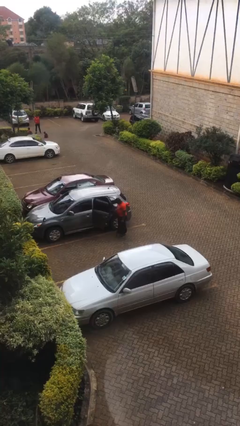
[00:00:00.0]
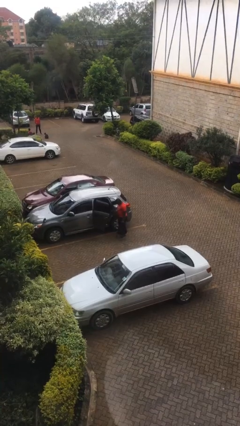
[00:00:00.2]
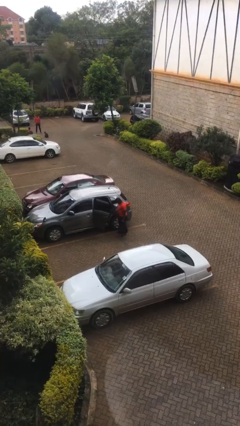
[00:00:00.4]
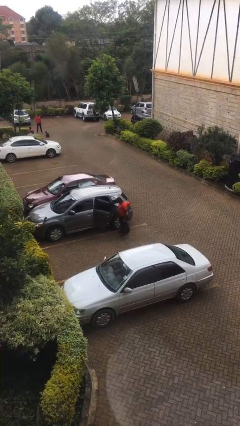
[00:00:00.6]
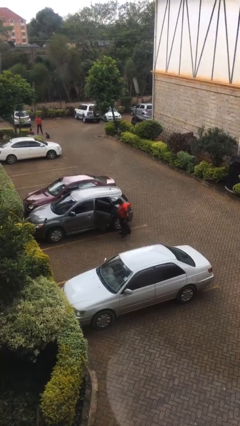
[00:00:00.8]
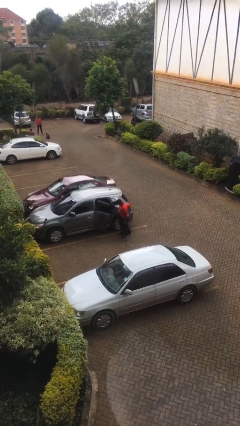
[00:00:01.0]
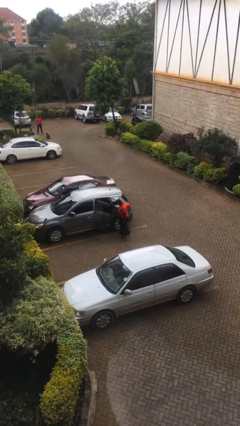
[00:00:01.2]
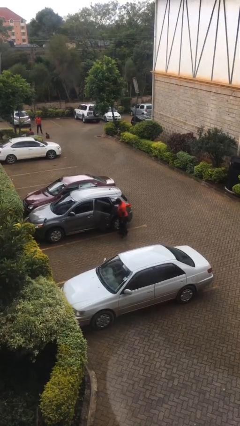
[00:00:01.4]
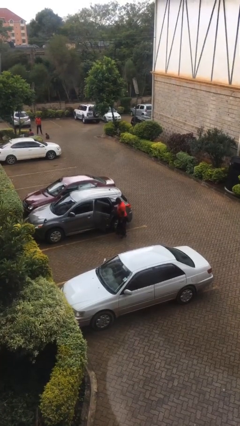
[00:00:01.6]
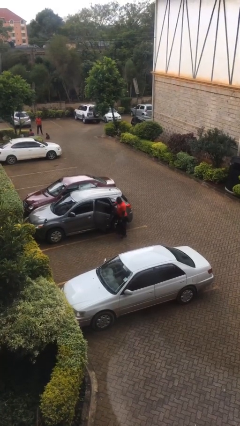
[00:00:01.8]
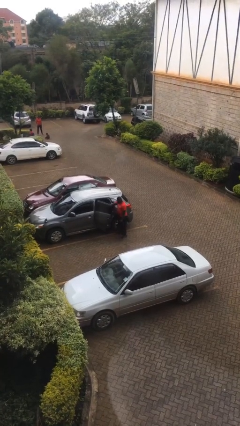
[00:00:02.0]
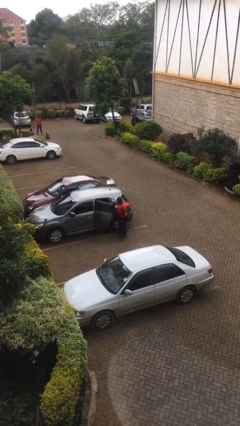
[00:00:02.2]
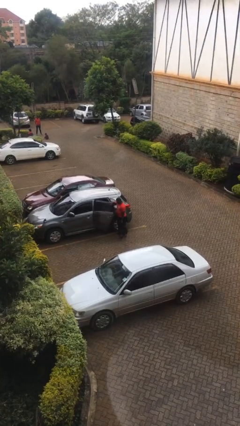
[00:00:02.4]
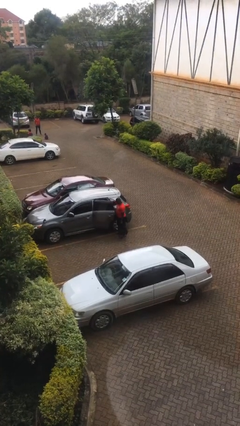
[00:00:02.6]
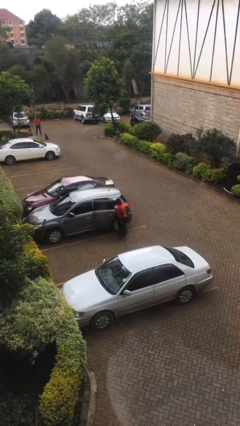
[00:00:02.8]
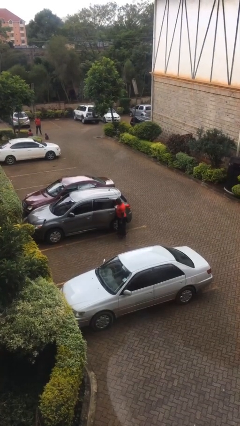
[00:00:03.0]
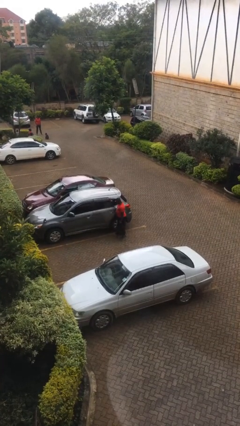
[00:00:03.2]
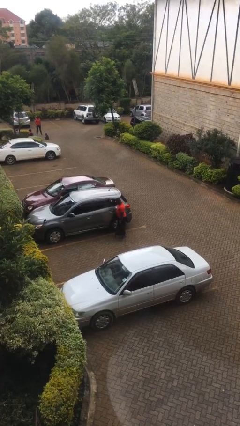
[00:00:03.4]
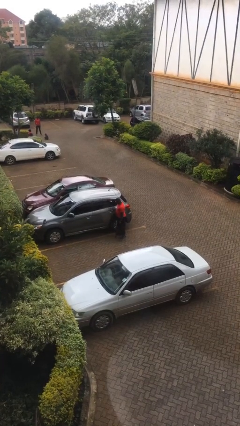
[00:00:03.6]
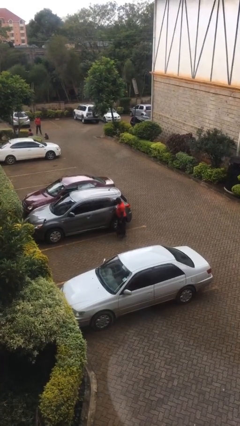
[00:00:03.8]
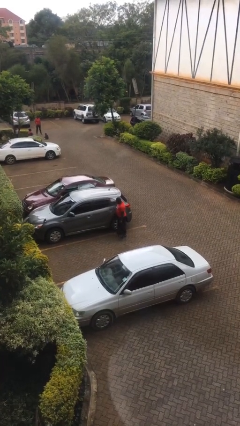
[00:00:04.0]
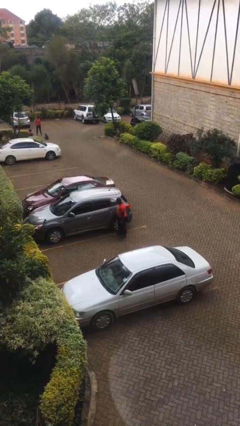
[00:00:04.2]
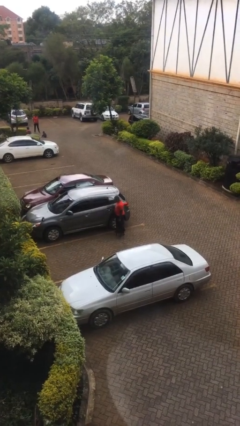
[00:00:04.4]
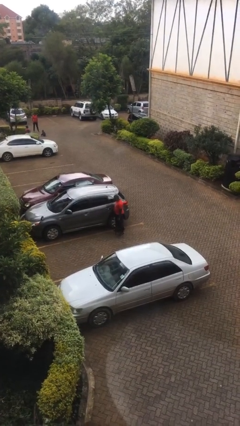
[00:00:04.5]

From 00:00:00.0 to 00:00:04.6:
person closes car door

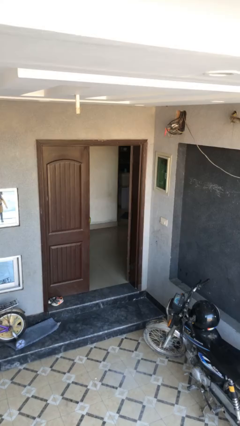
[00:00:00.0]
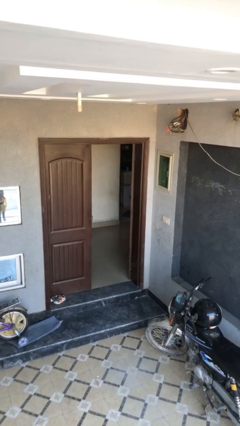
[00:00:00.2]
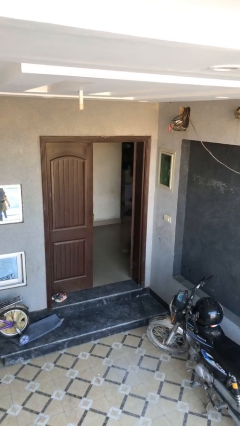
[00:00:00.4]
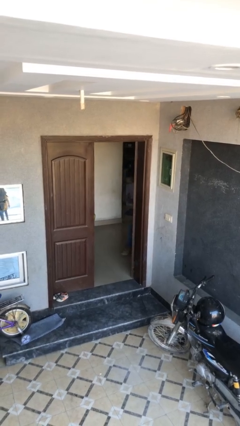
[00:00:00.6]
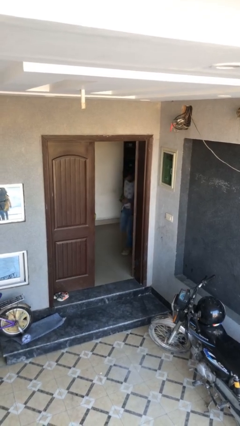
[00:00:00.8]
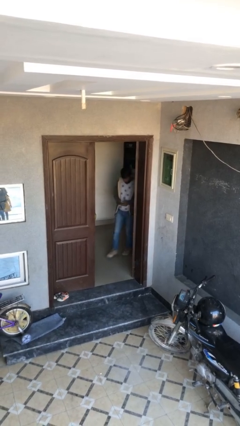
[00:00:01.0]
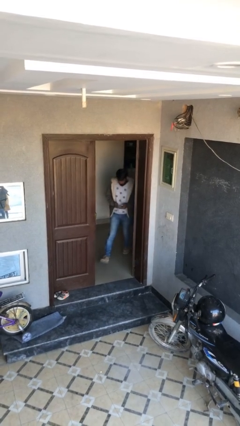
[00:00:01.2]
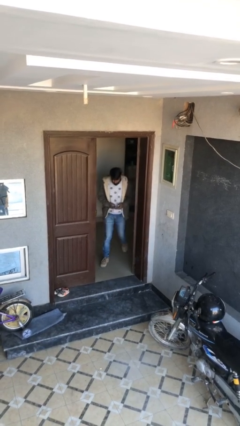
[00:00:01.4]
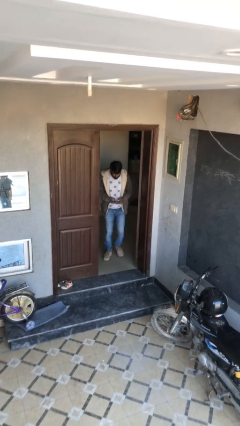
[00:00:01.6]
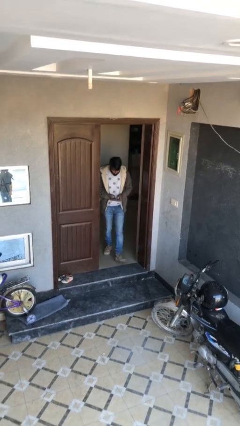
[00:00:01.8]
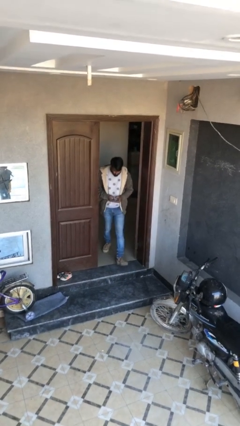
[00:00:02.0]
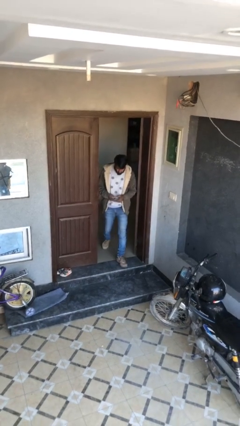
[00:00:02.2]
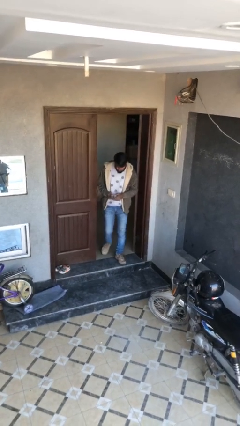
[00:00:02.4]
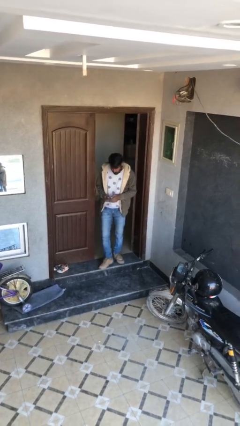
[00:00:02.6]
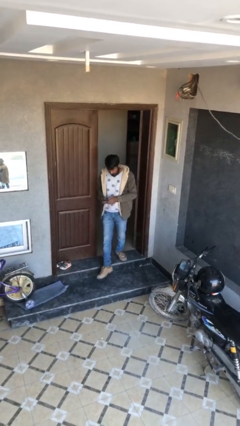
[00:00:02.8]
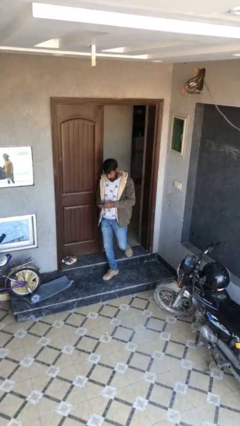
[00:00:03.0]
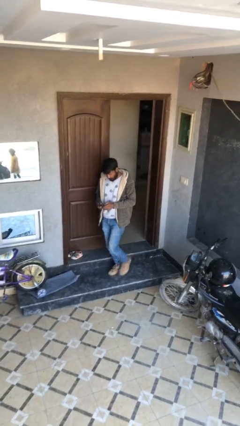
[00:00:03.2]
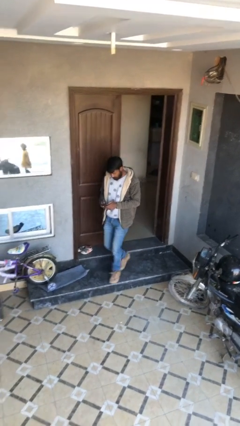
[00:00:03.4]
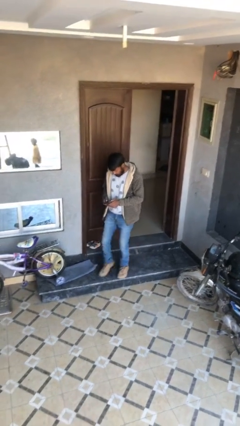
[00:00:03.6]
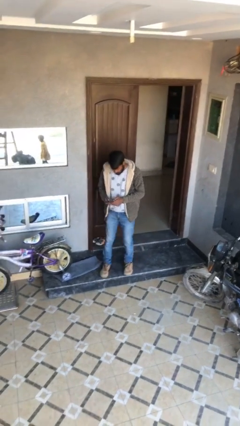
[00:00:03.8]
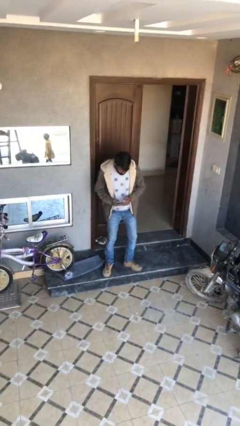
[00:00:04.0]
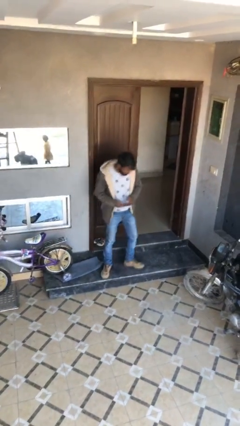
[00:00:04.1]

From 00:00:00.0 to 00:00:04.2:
person enters scene through structure

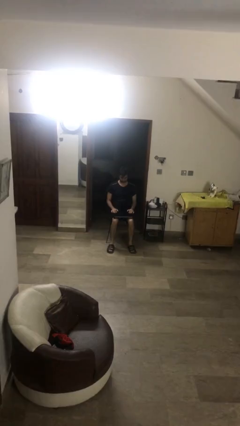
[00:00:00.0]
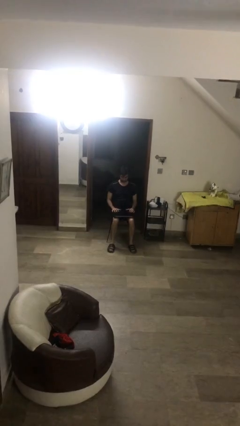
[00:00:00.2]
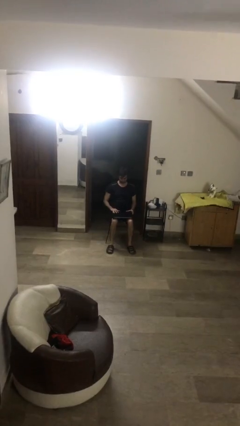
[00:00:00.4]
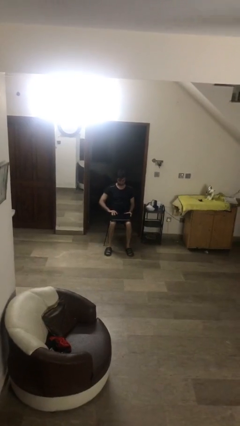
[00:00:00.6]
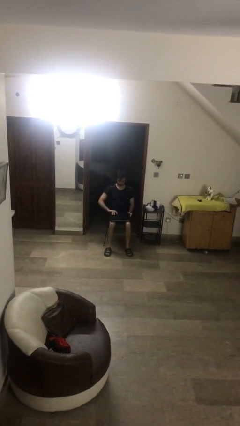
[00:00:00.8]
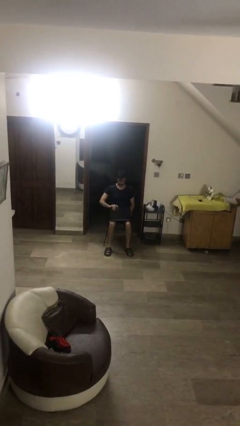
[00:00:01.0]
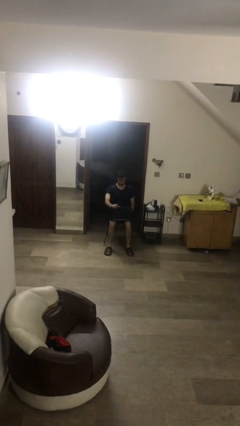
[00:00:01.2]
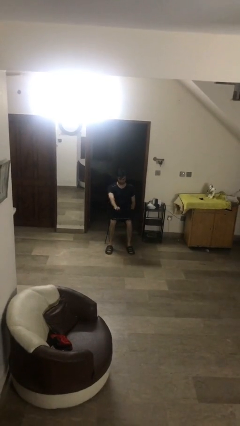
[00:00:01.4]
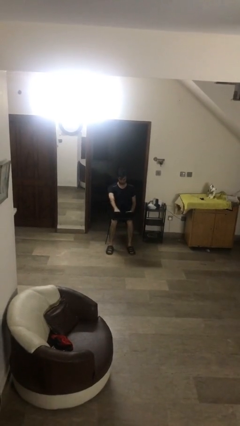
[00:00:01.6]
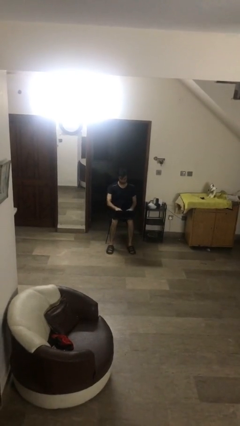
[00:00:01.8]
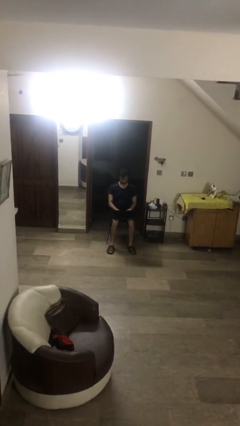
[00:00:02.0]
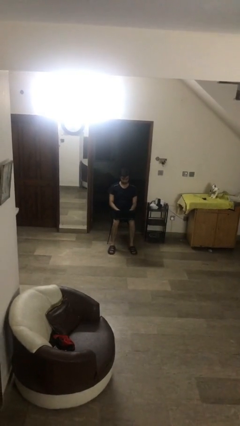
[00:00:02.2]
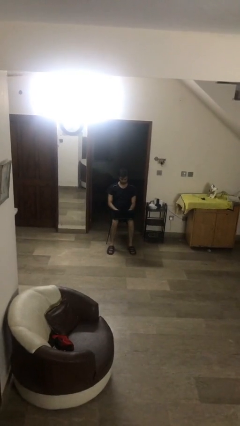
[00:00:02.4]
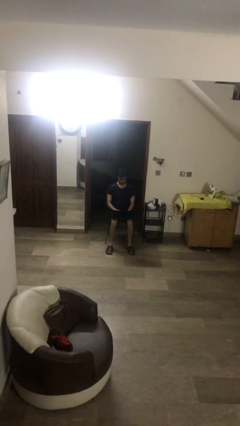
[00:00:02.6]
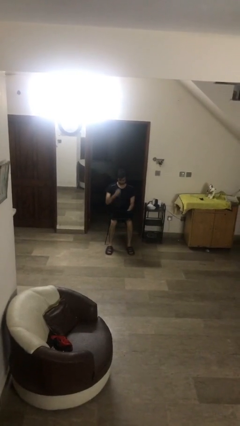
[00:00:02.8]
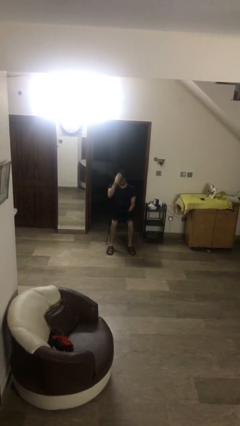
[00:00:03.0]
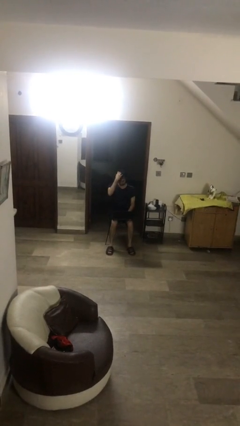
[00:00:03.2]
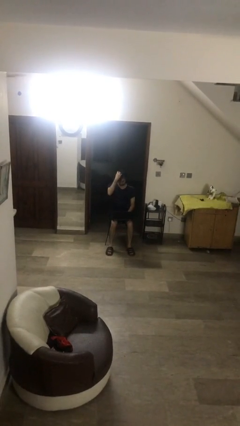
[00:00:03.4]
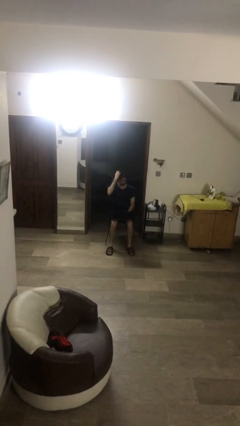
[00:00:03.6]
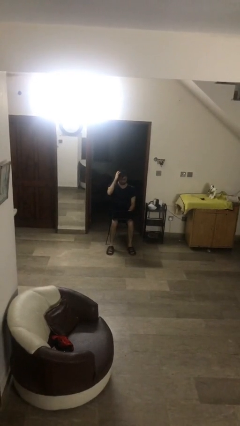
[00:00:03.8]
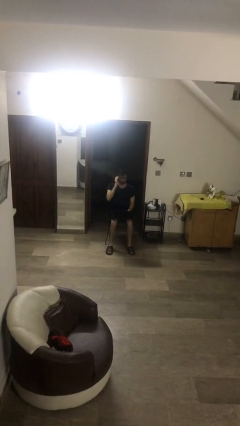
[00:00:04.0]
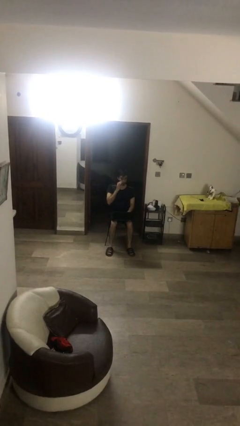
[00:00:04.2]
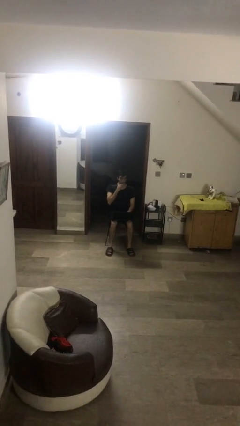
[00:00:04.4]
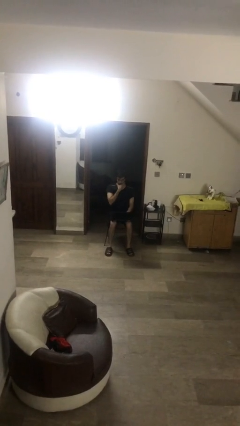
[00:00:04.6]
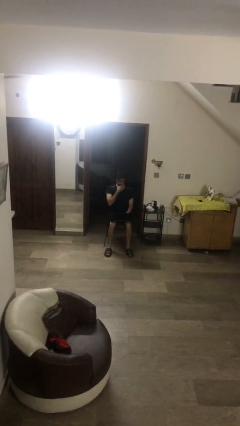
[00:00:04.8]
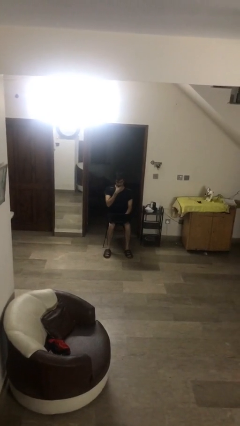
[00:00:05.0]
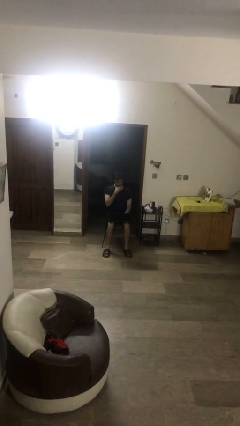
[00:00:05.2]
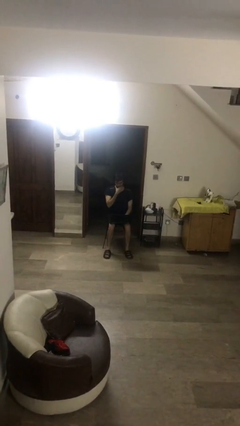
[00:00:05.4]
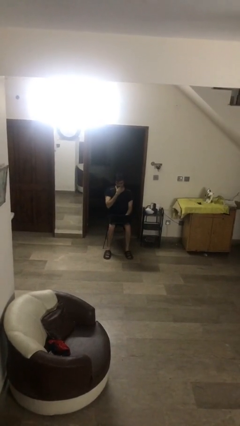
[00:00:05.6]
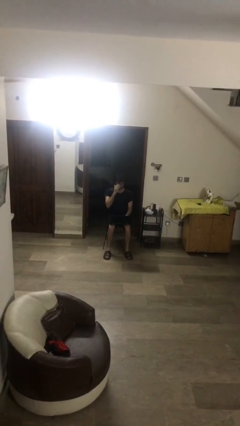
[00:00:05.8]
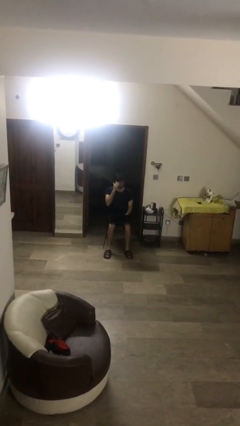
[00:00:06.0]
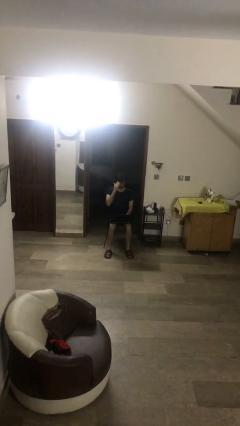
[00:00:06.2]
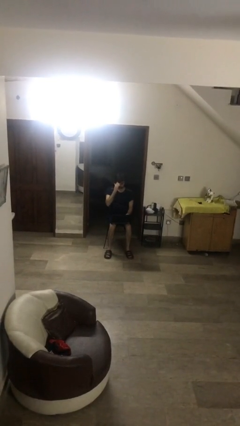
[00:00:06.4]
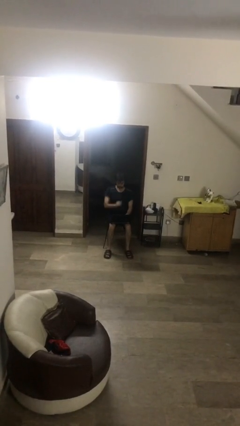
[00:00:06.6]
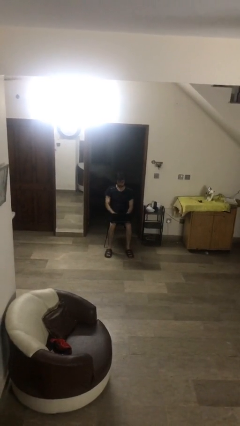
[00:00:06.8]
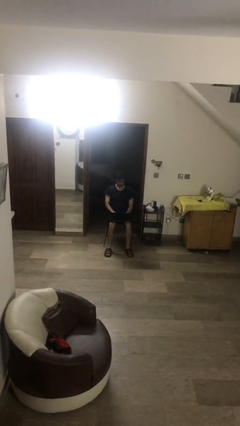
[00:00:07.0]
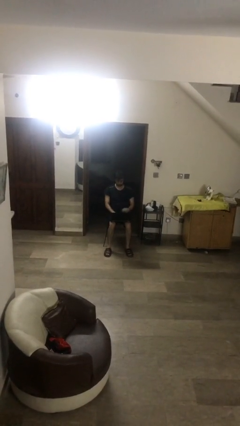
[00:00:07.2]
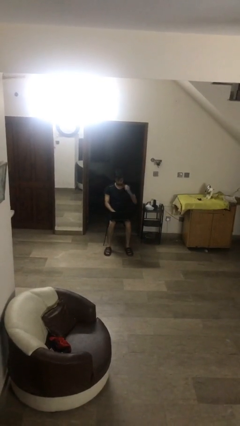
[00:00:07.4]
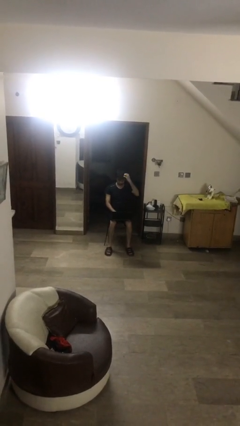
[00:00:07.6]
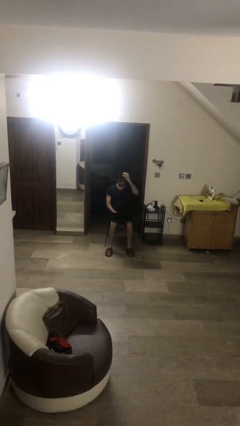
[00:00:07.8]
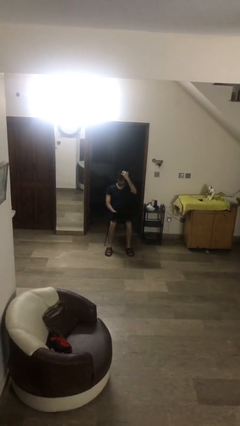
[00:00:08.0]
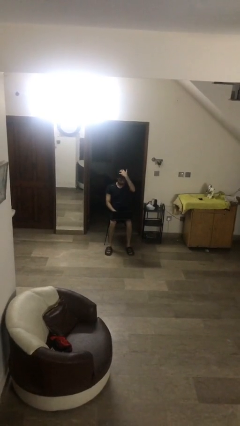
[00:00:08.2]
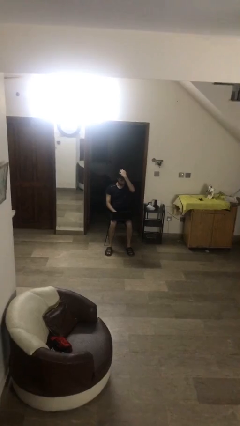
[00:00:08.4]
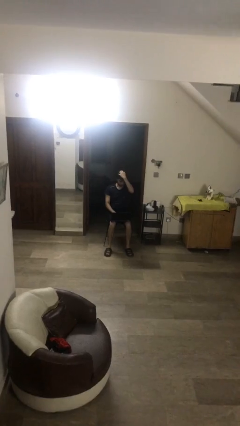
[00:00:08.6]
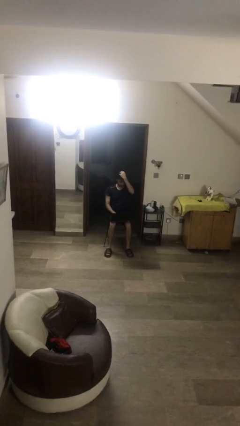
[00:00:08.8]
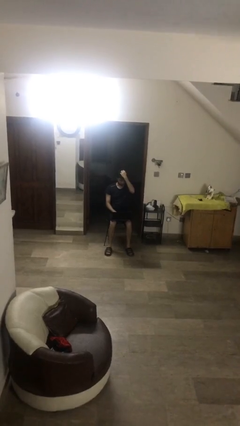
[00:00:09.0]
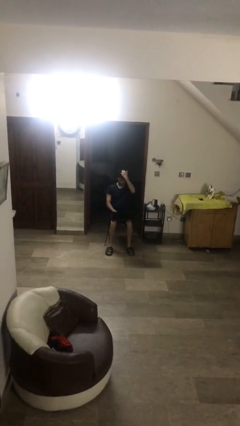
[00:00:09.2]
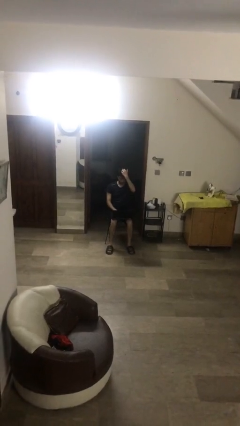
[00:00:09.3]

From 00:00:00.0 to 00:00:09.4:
person interacts with laptop
